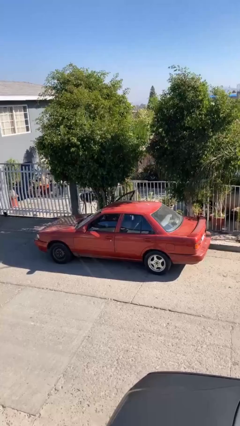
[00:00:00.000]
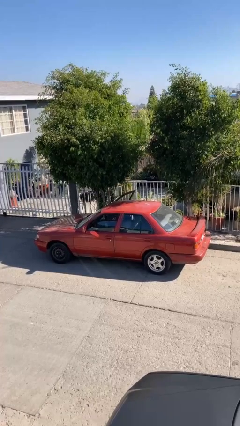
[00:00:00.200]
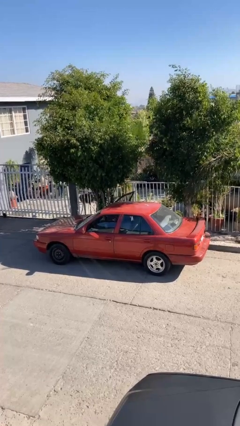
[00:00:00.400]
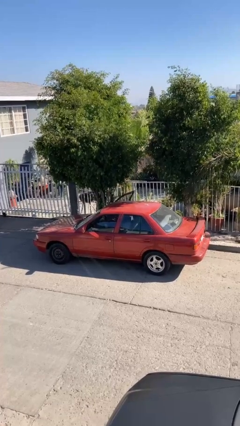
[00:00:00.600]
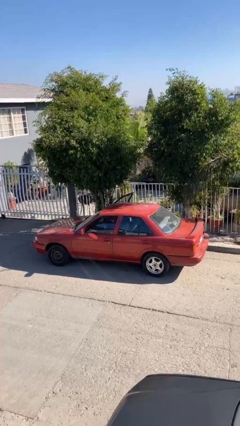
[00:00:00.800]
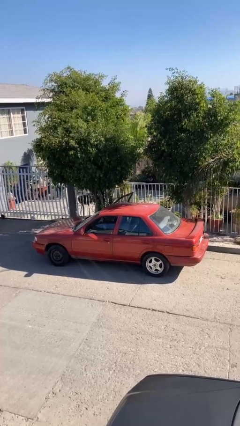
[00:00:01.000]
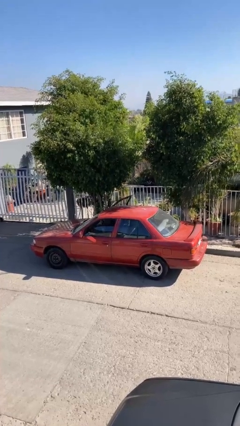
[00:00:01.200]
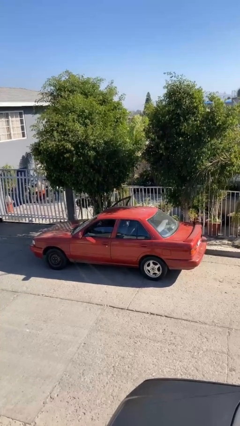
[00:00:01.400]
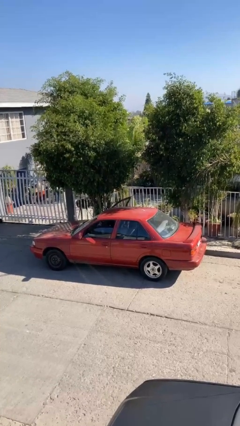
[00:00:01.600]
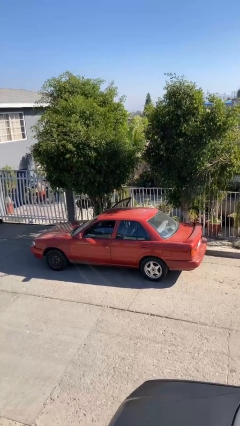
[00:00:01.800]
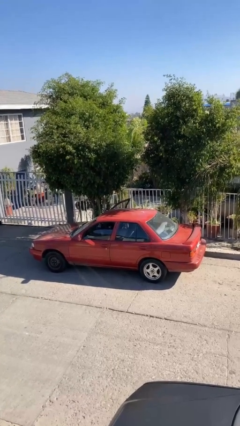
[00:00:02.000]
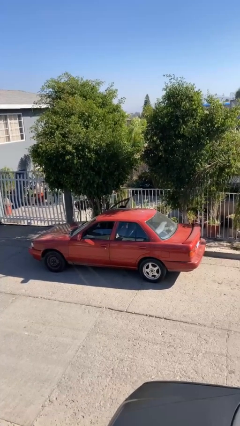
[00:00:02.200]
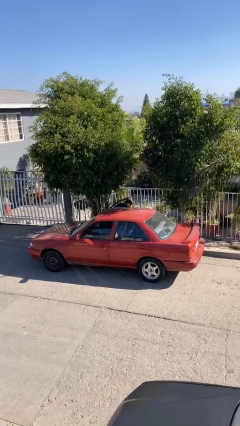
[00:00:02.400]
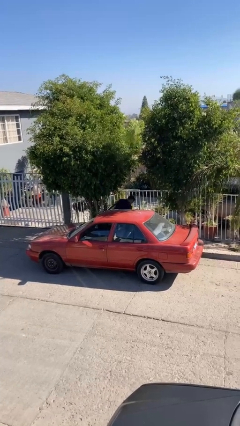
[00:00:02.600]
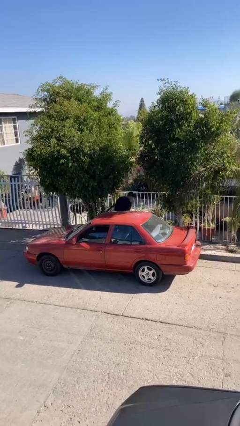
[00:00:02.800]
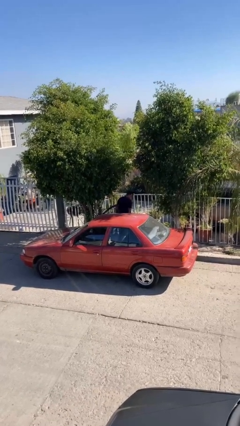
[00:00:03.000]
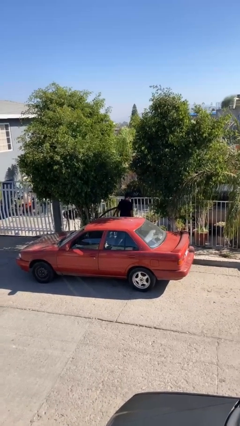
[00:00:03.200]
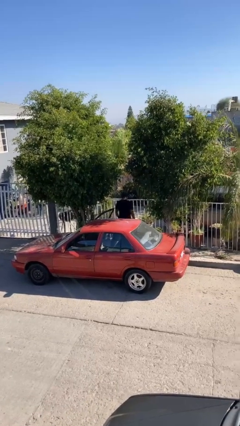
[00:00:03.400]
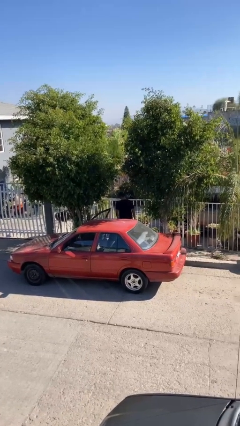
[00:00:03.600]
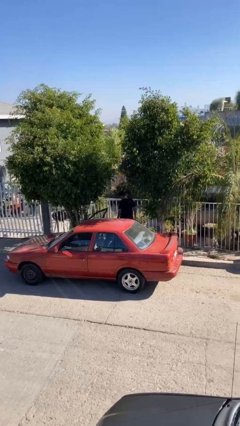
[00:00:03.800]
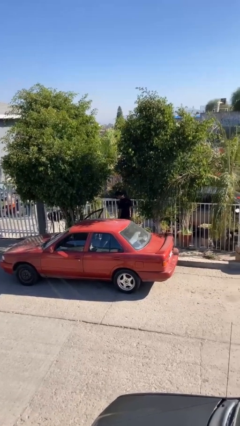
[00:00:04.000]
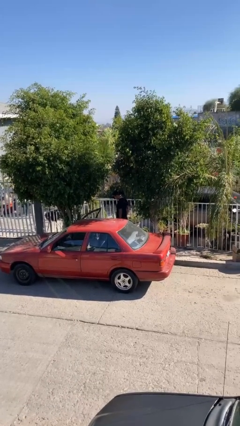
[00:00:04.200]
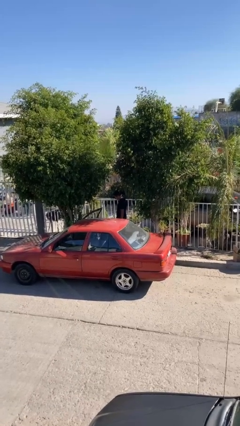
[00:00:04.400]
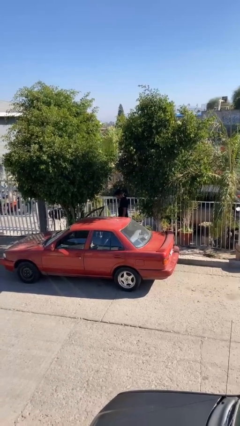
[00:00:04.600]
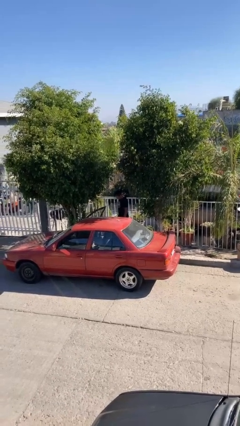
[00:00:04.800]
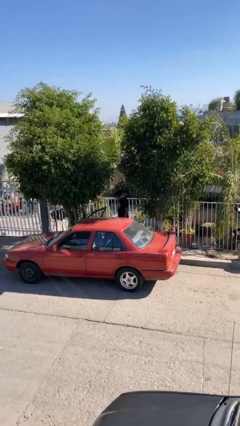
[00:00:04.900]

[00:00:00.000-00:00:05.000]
person exits car

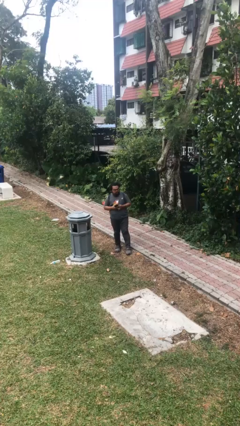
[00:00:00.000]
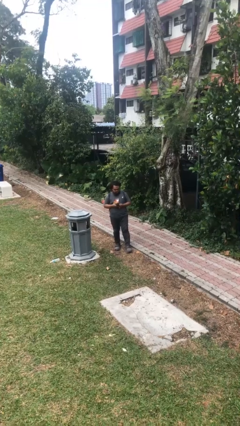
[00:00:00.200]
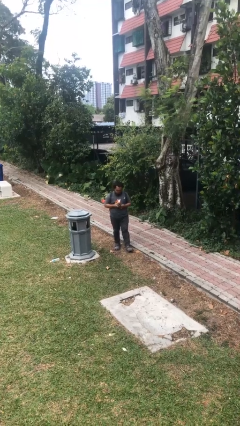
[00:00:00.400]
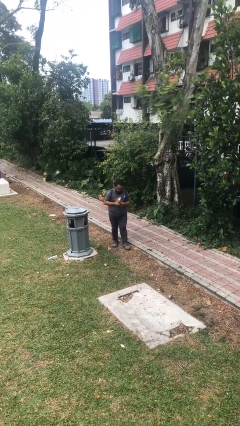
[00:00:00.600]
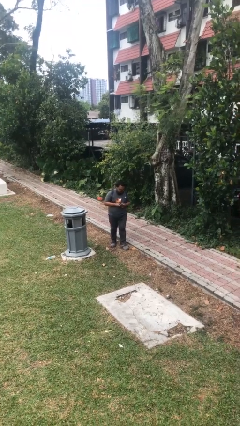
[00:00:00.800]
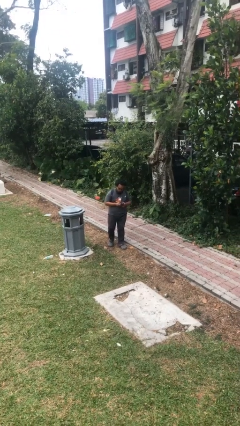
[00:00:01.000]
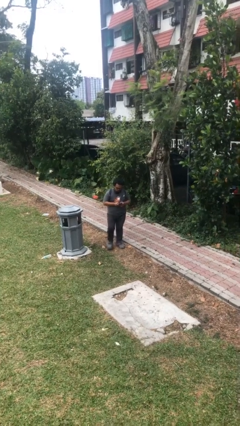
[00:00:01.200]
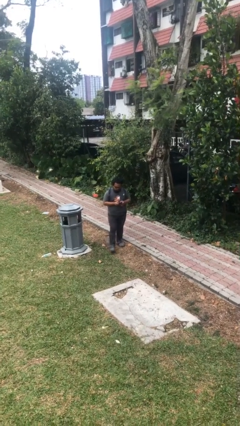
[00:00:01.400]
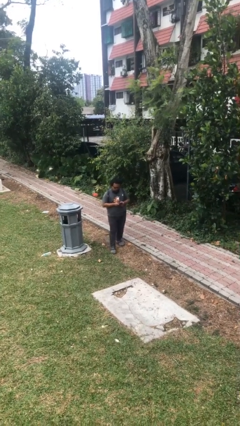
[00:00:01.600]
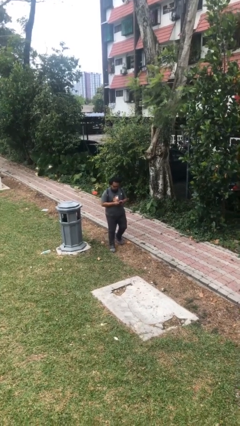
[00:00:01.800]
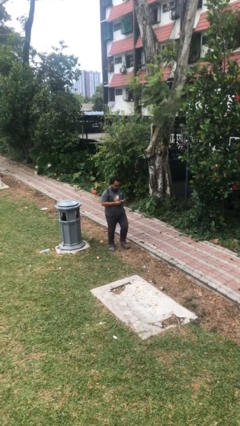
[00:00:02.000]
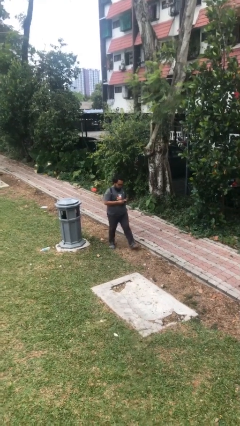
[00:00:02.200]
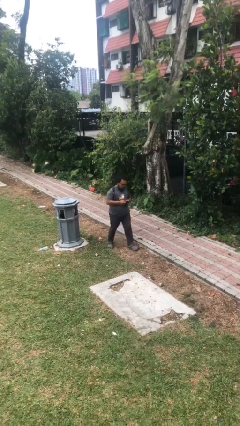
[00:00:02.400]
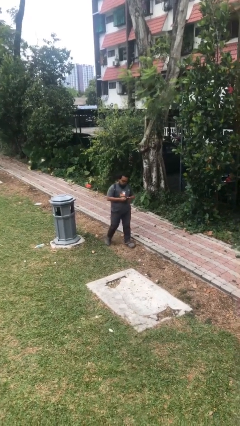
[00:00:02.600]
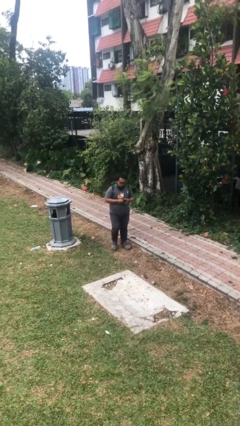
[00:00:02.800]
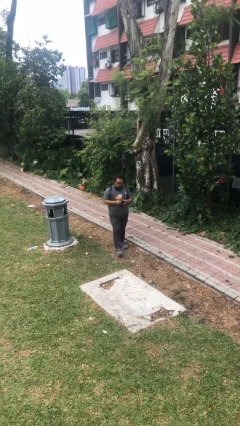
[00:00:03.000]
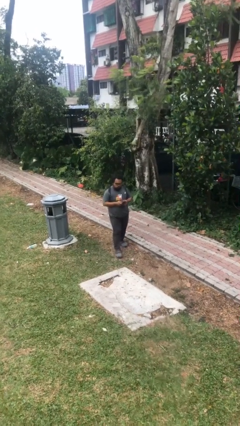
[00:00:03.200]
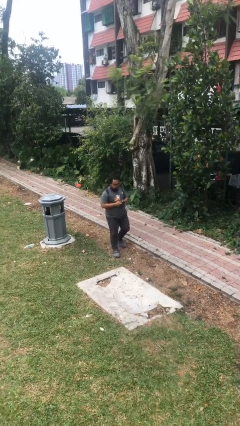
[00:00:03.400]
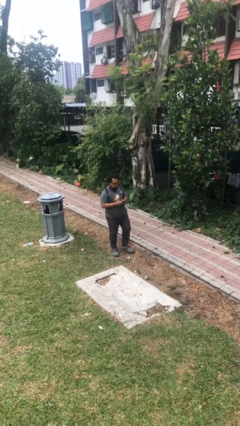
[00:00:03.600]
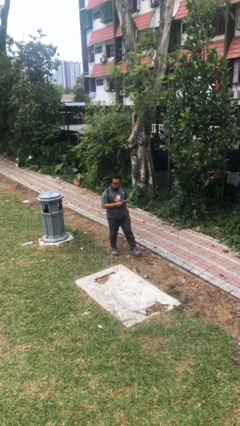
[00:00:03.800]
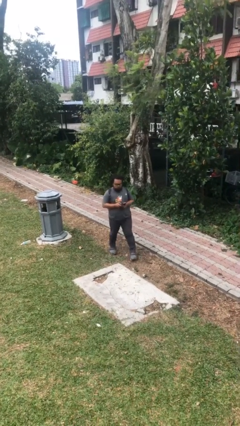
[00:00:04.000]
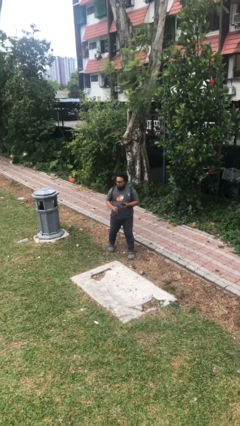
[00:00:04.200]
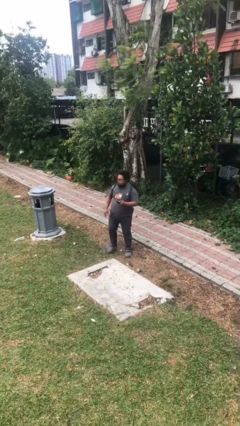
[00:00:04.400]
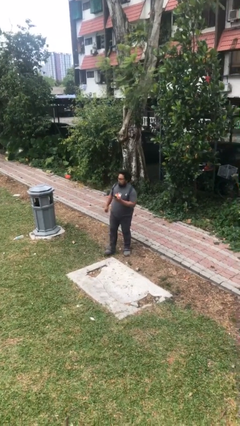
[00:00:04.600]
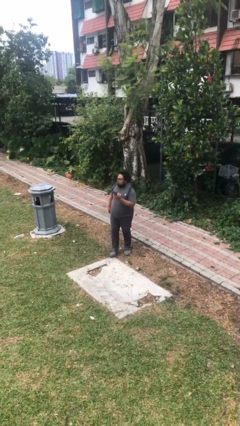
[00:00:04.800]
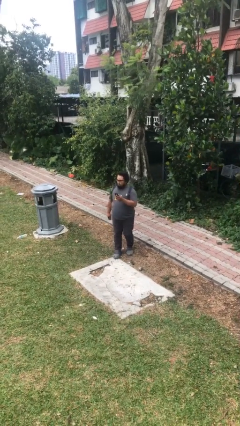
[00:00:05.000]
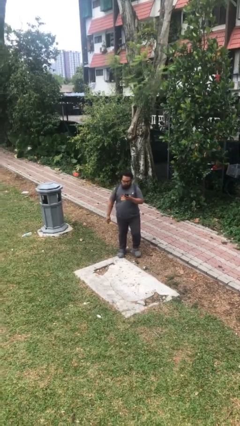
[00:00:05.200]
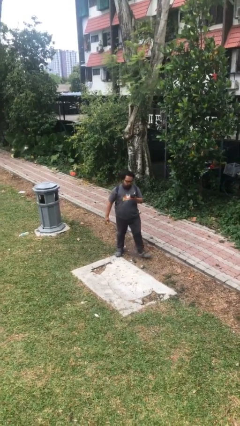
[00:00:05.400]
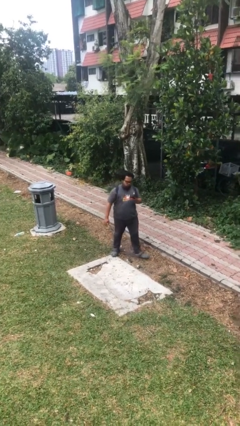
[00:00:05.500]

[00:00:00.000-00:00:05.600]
person texts on phone

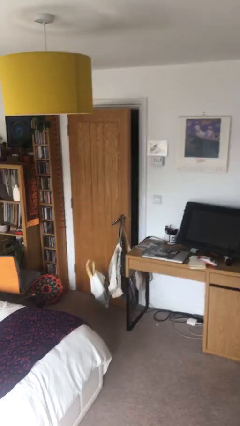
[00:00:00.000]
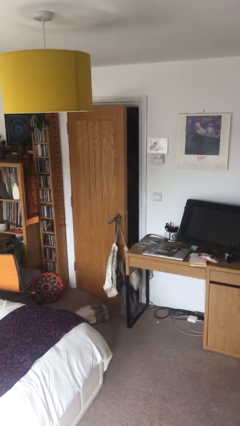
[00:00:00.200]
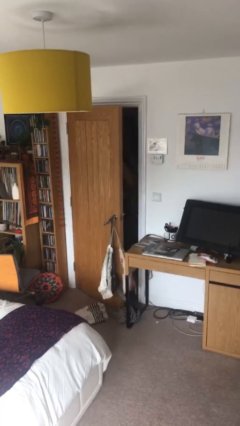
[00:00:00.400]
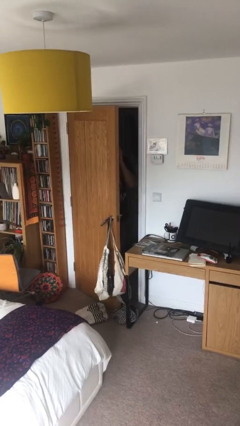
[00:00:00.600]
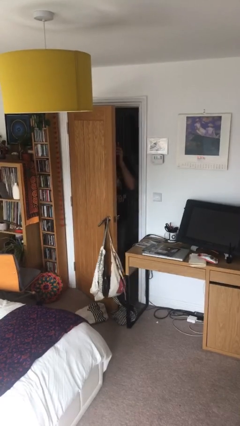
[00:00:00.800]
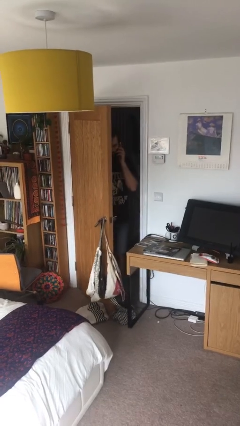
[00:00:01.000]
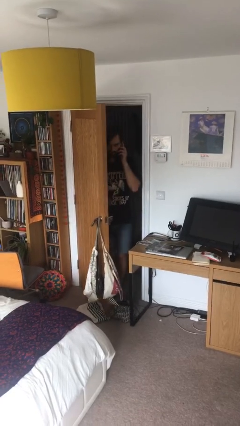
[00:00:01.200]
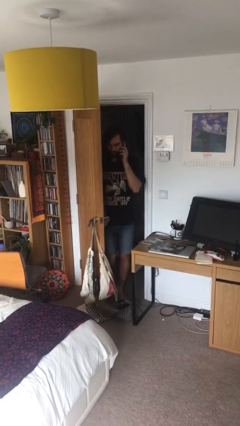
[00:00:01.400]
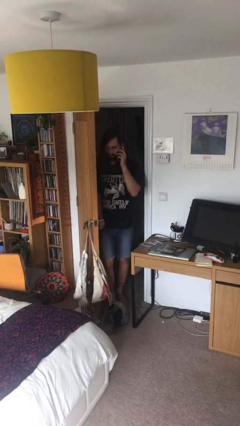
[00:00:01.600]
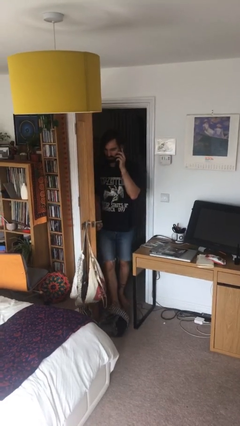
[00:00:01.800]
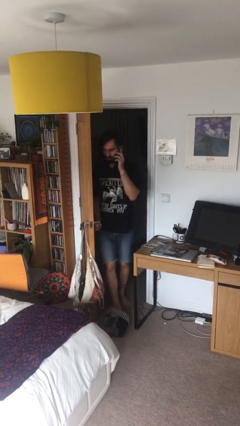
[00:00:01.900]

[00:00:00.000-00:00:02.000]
person opens facility door

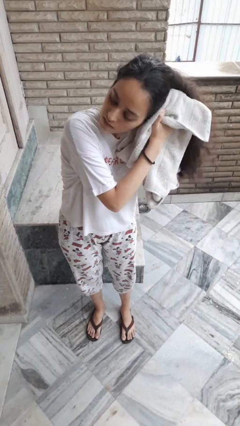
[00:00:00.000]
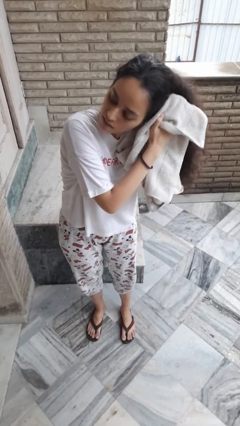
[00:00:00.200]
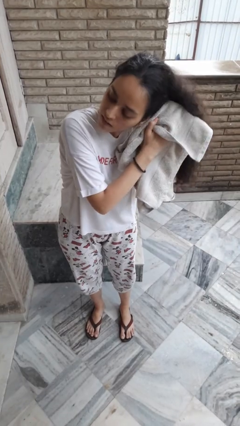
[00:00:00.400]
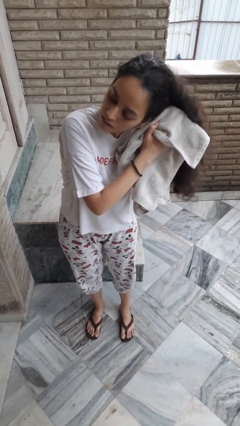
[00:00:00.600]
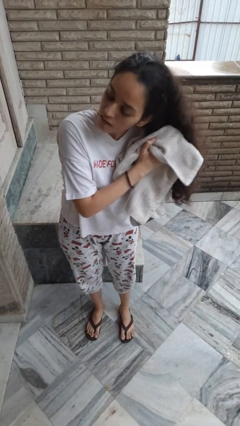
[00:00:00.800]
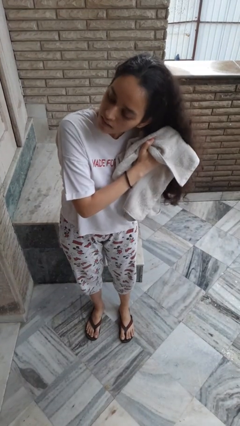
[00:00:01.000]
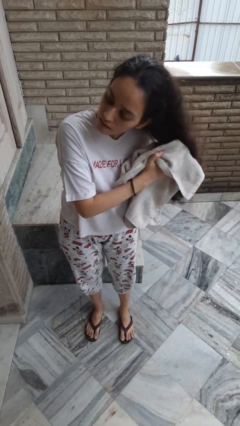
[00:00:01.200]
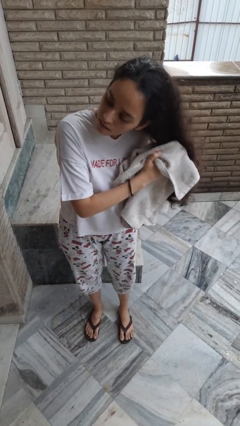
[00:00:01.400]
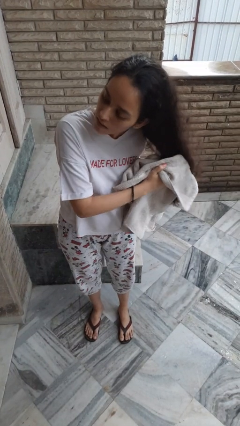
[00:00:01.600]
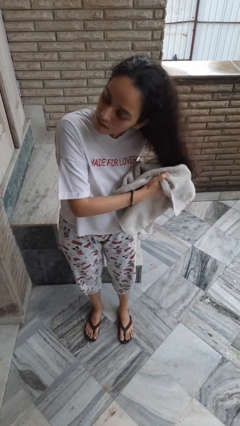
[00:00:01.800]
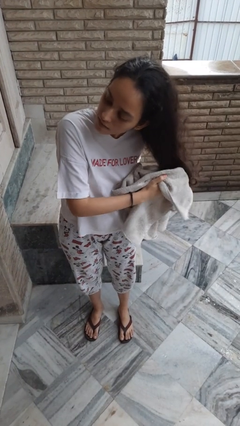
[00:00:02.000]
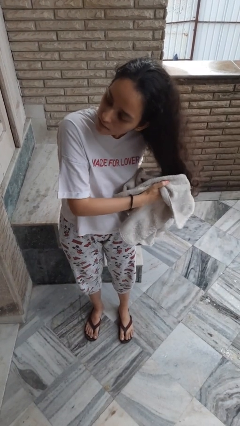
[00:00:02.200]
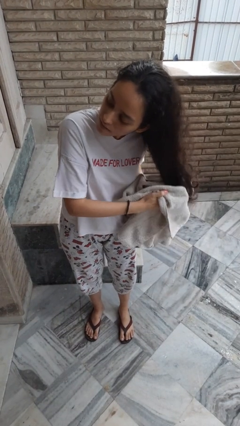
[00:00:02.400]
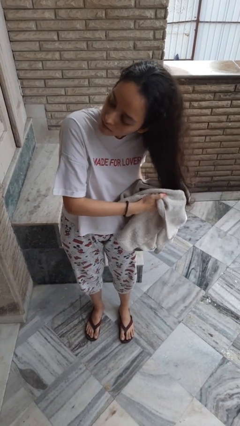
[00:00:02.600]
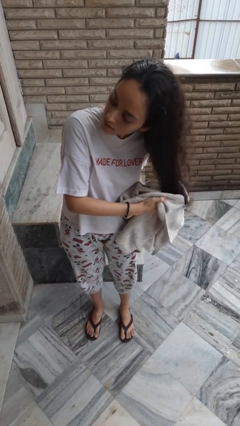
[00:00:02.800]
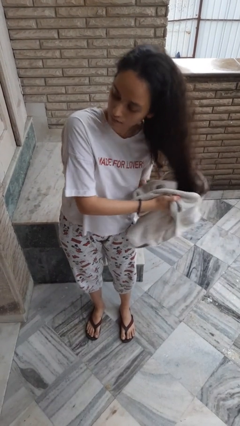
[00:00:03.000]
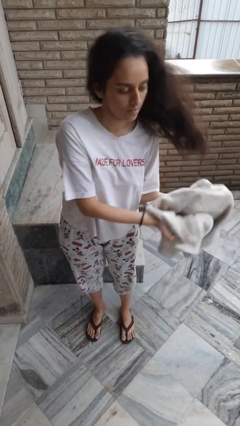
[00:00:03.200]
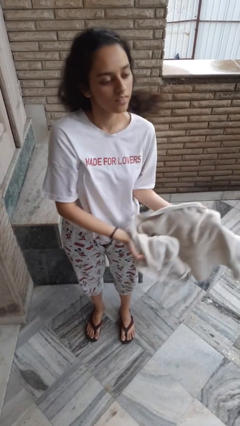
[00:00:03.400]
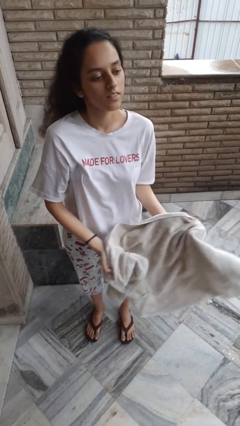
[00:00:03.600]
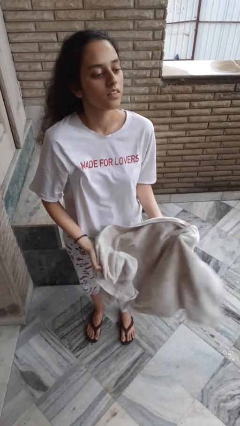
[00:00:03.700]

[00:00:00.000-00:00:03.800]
person dries hair with towel

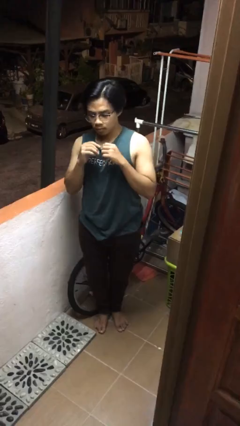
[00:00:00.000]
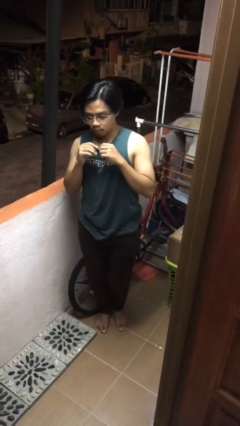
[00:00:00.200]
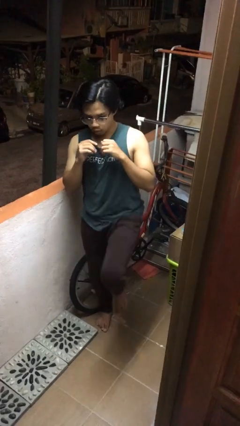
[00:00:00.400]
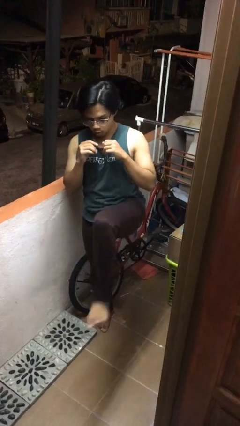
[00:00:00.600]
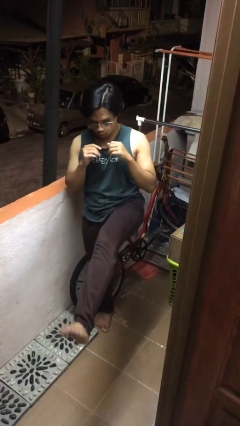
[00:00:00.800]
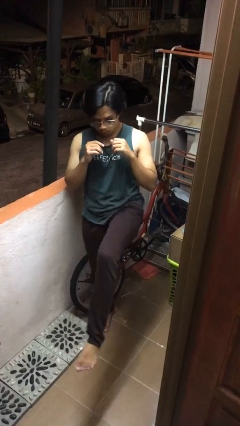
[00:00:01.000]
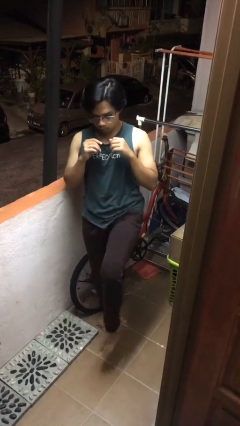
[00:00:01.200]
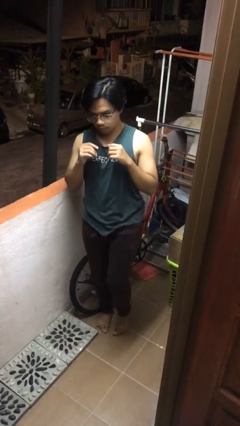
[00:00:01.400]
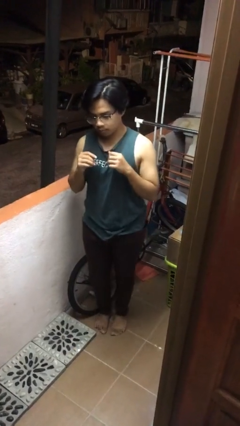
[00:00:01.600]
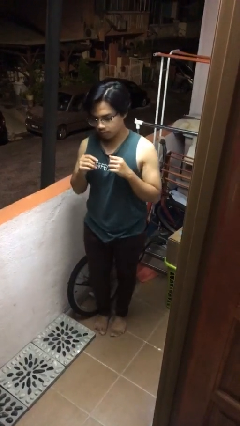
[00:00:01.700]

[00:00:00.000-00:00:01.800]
person karate kicks
